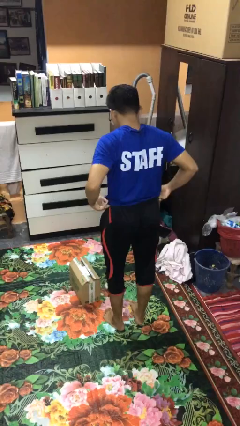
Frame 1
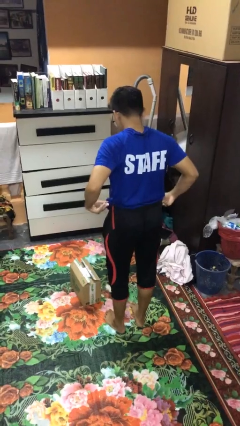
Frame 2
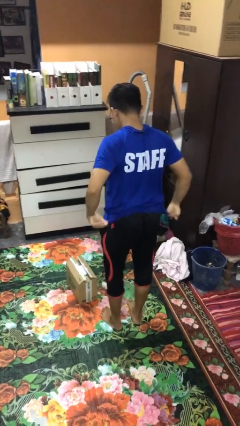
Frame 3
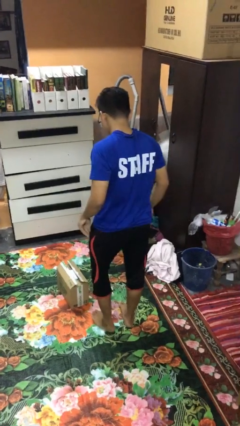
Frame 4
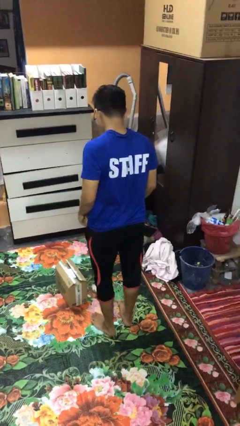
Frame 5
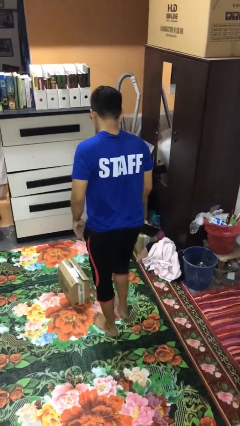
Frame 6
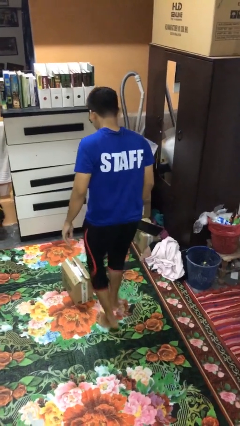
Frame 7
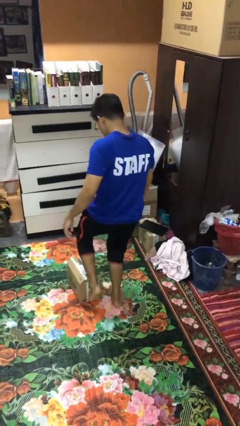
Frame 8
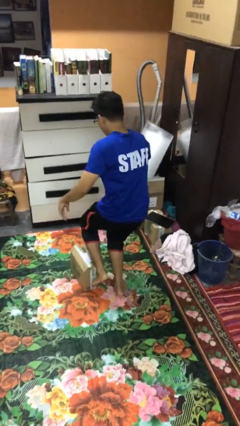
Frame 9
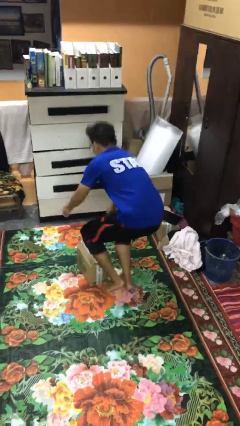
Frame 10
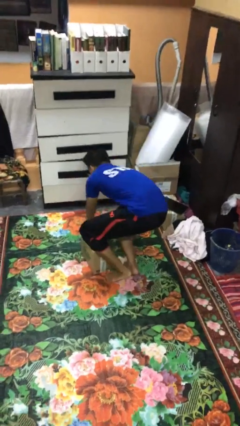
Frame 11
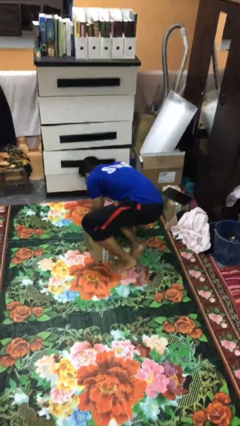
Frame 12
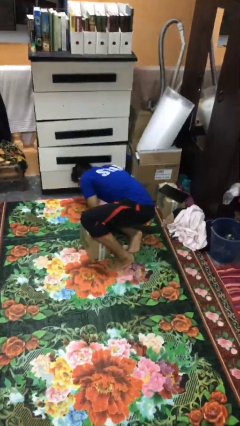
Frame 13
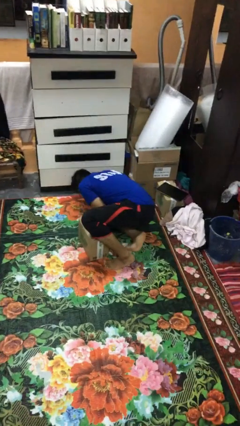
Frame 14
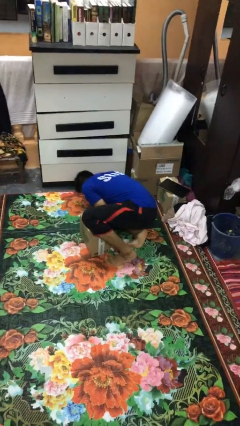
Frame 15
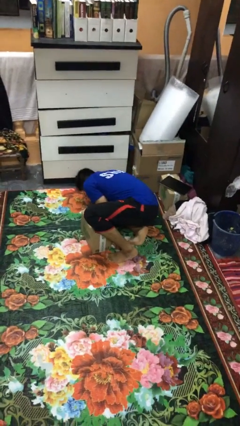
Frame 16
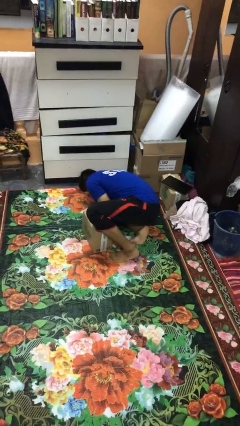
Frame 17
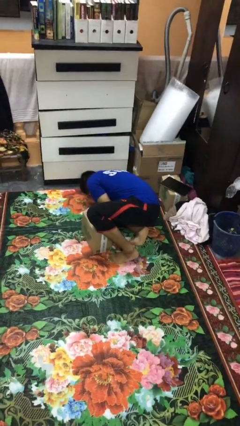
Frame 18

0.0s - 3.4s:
person trips on object on floor

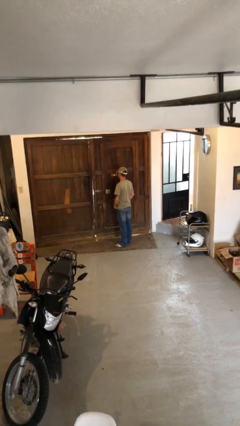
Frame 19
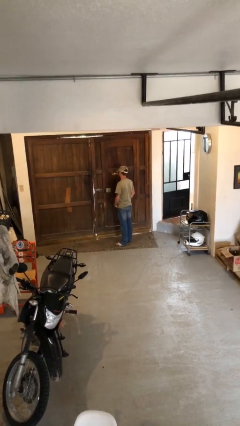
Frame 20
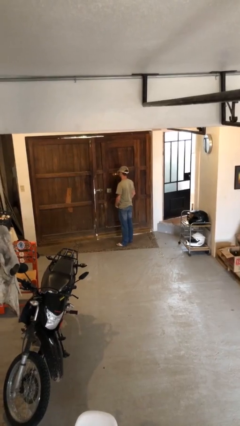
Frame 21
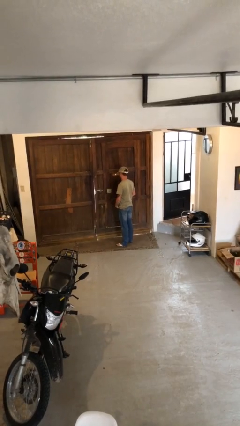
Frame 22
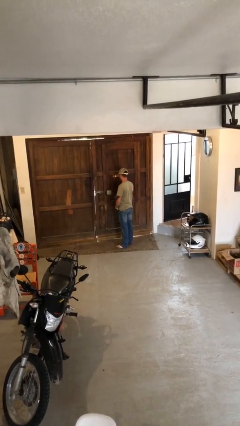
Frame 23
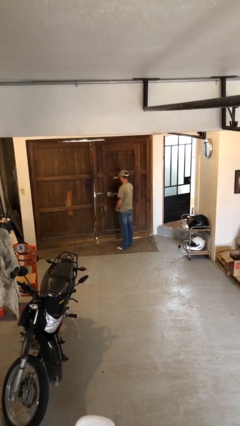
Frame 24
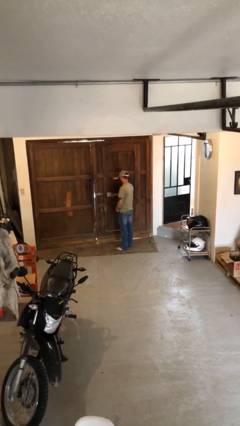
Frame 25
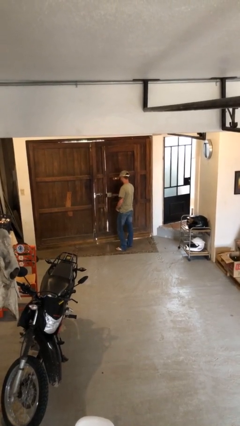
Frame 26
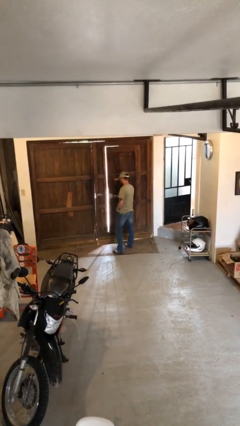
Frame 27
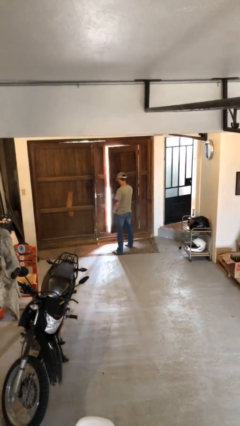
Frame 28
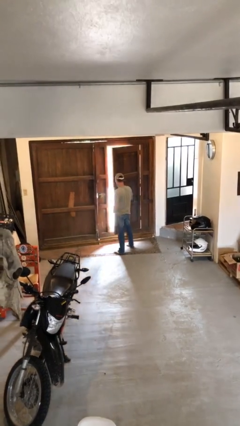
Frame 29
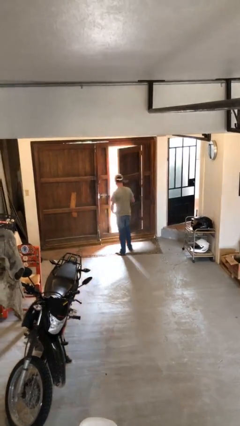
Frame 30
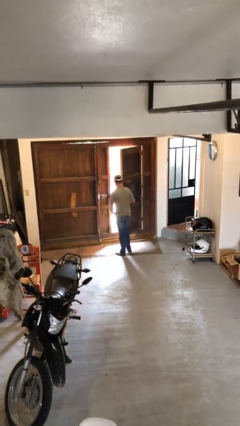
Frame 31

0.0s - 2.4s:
person opens facility door

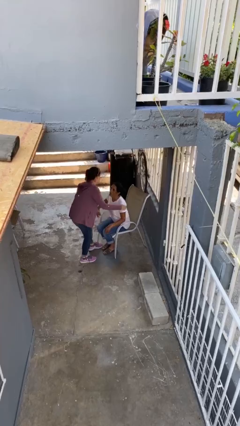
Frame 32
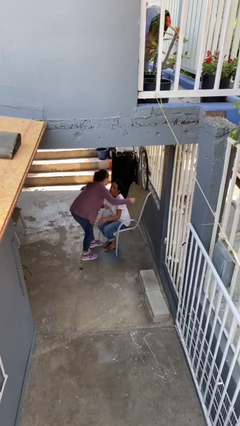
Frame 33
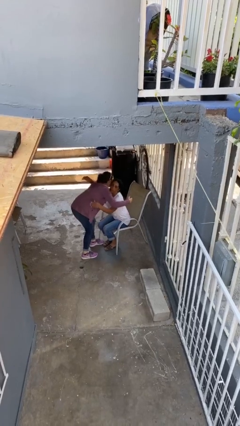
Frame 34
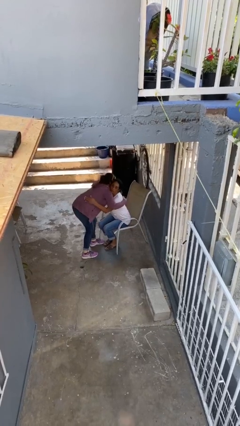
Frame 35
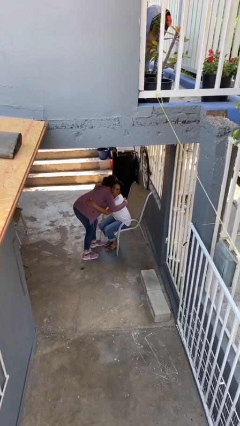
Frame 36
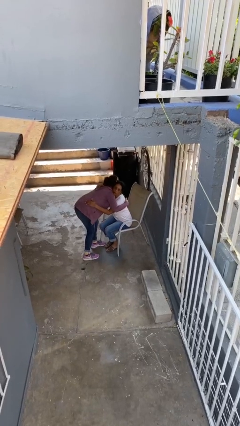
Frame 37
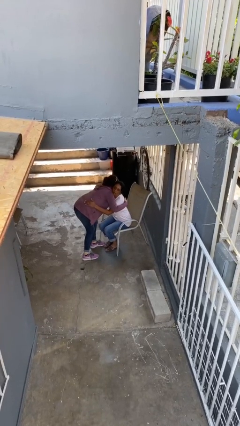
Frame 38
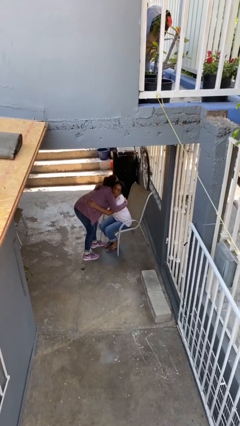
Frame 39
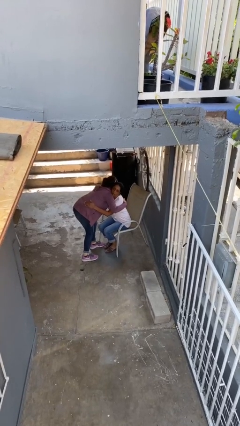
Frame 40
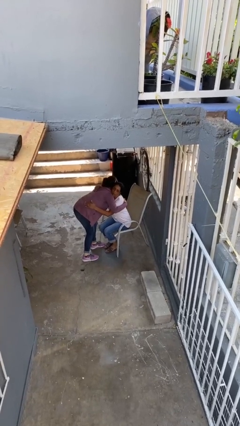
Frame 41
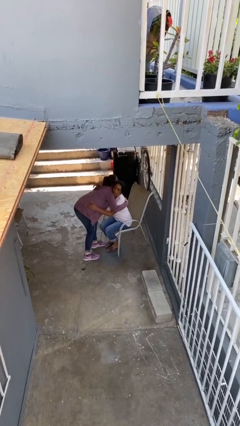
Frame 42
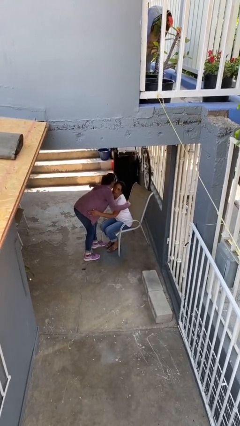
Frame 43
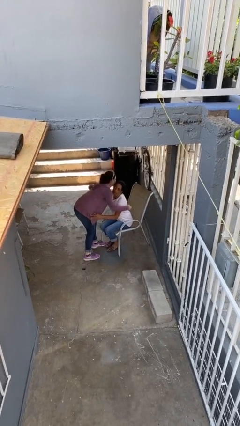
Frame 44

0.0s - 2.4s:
person embraces person

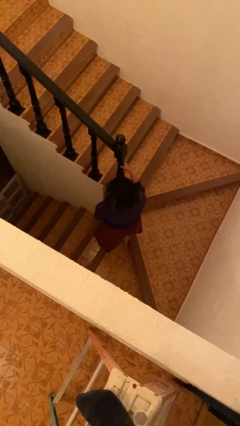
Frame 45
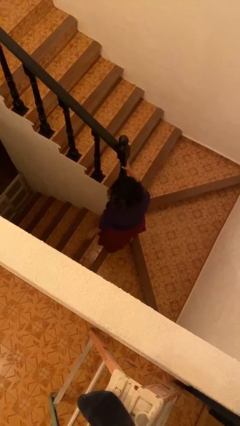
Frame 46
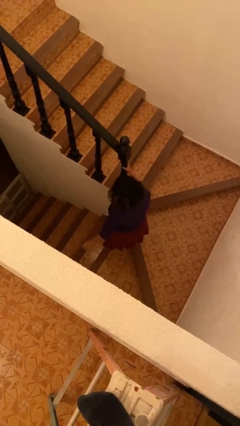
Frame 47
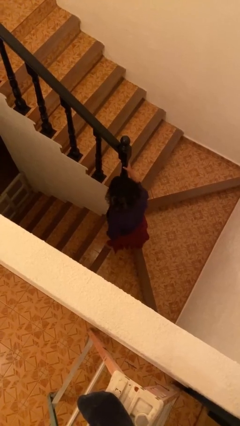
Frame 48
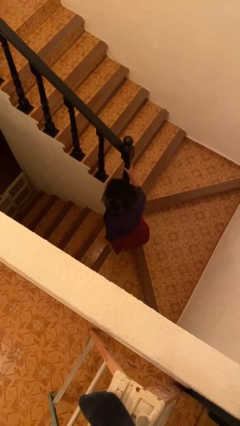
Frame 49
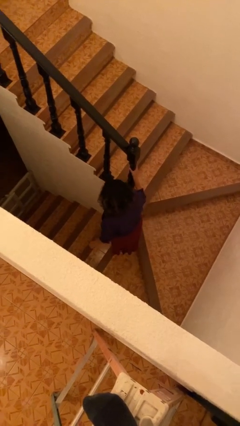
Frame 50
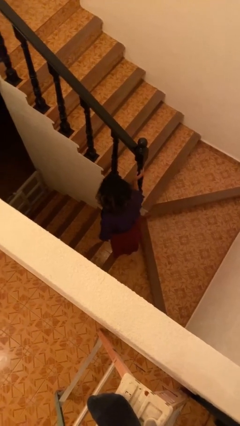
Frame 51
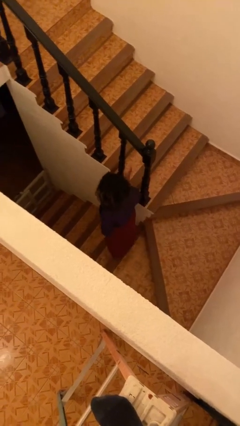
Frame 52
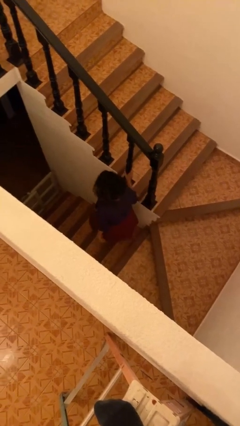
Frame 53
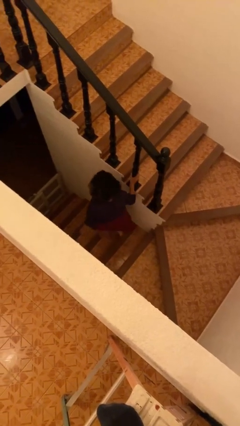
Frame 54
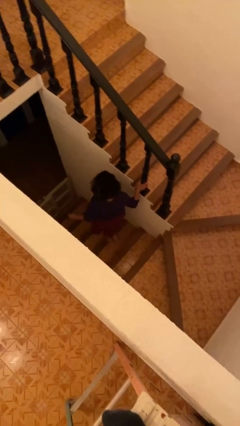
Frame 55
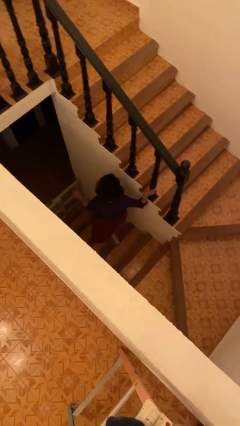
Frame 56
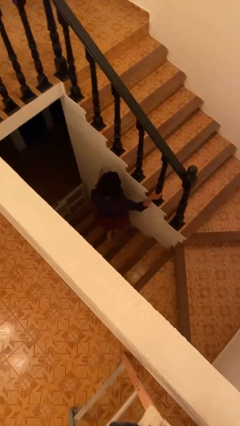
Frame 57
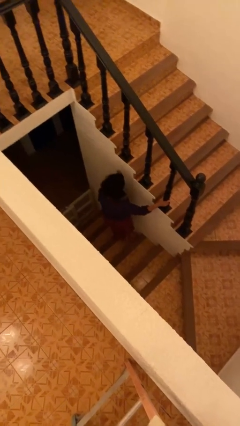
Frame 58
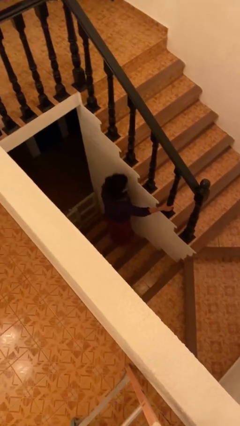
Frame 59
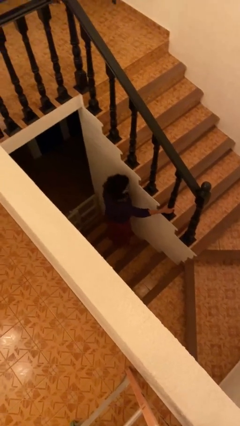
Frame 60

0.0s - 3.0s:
person climbs down stairs

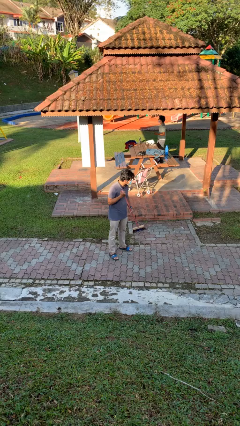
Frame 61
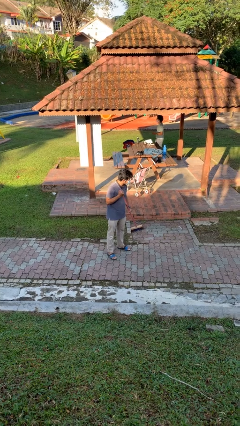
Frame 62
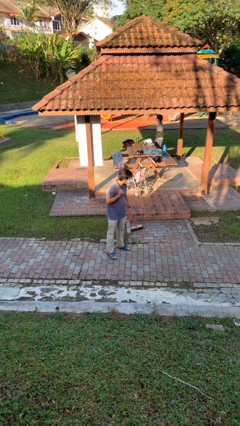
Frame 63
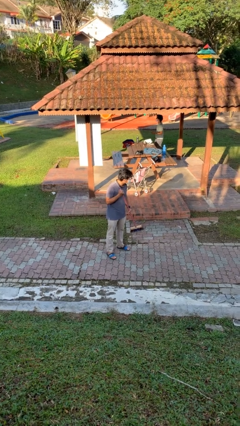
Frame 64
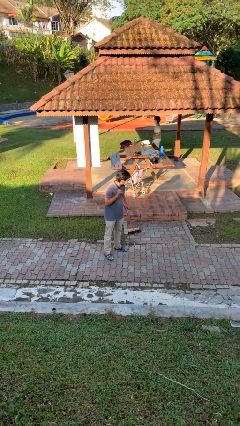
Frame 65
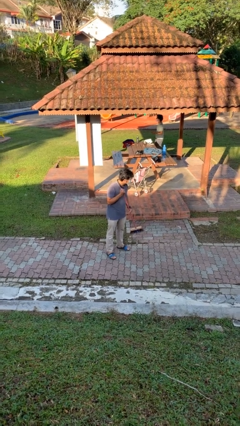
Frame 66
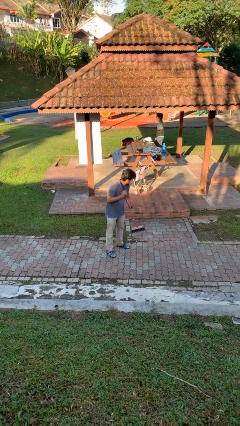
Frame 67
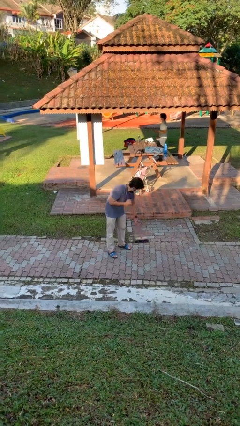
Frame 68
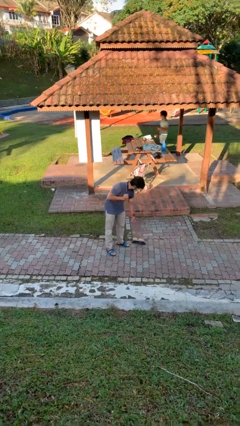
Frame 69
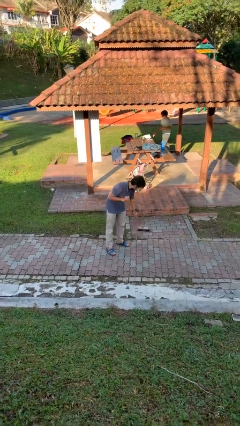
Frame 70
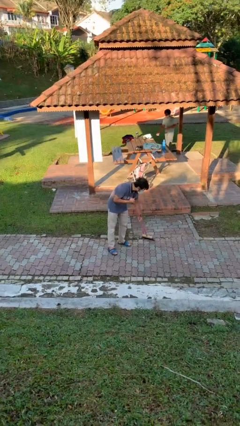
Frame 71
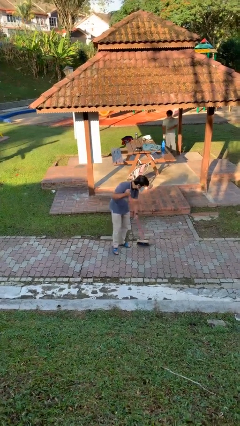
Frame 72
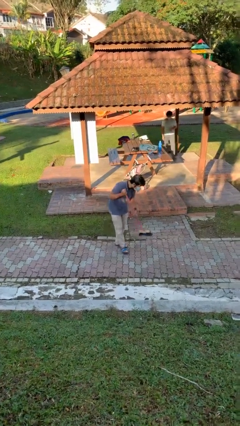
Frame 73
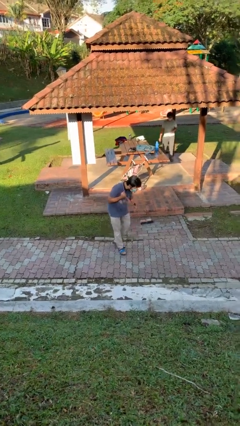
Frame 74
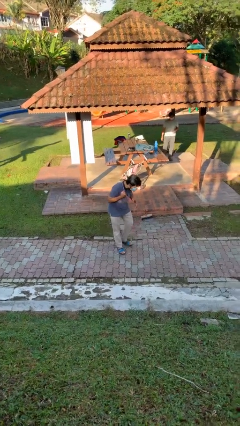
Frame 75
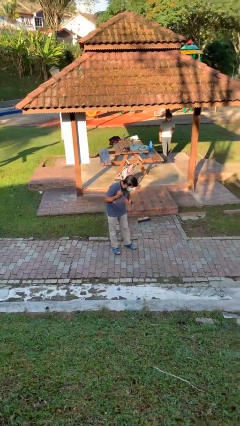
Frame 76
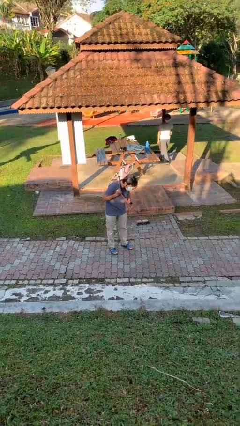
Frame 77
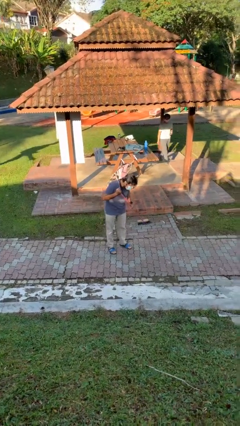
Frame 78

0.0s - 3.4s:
person sweeps floor

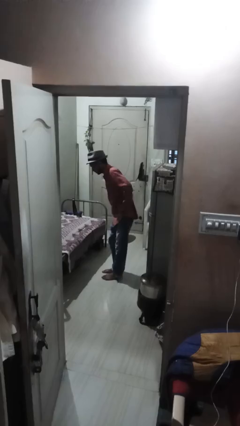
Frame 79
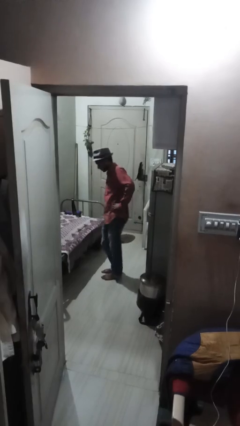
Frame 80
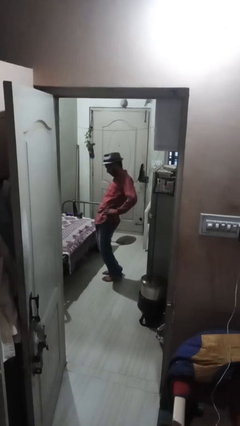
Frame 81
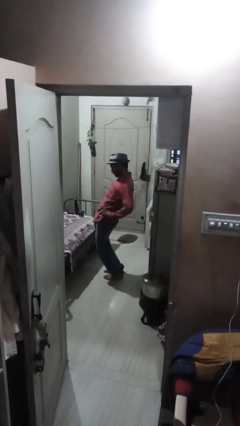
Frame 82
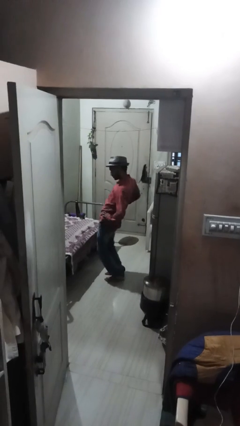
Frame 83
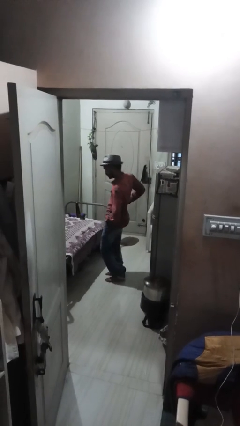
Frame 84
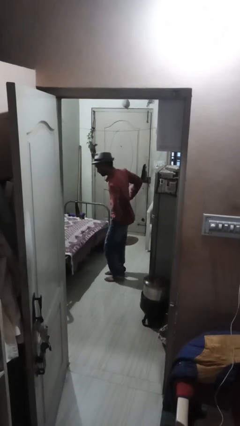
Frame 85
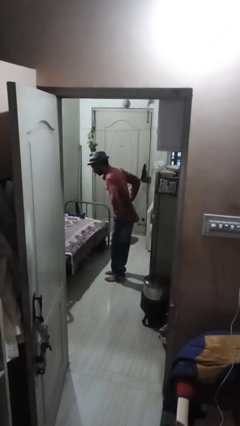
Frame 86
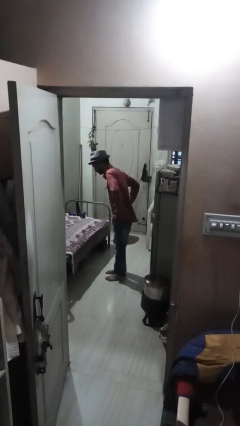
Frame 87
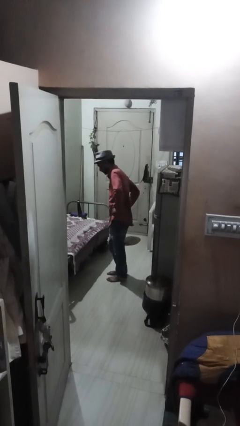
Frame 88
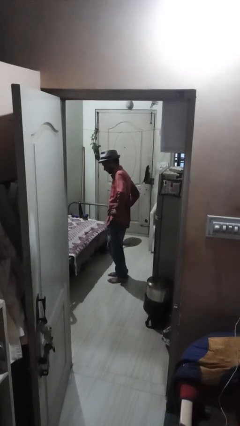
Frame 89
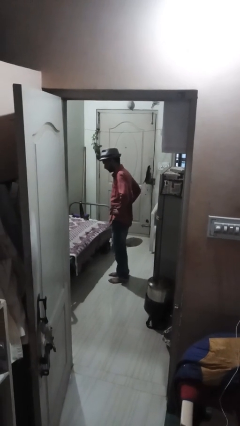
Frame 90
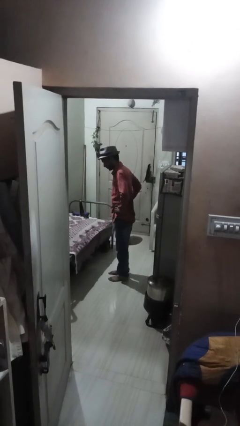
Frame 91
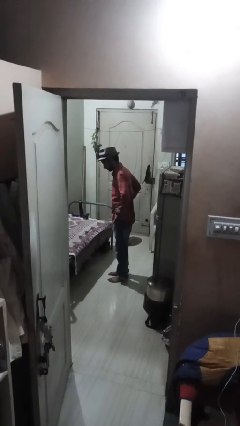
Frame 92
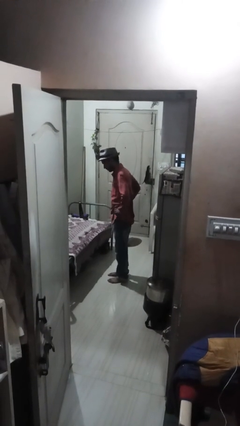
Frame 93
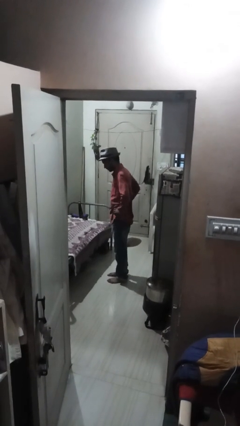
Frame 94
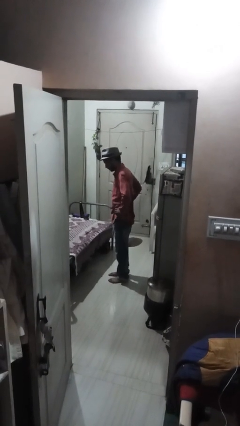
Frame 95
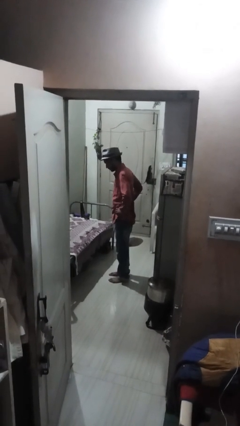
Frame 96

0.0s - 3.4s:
person wiggles hips
